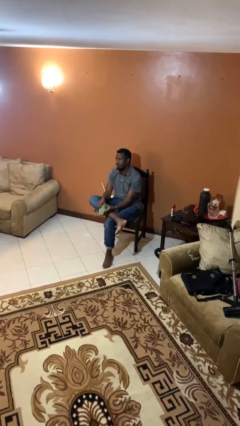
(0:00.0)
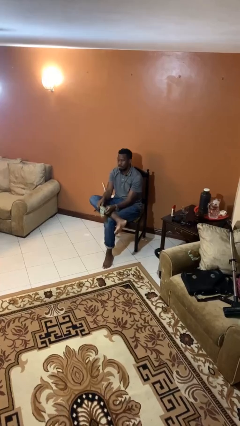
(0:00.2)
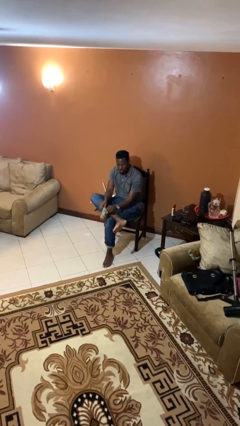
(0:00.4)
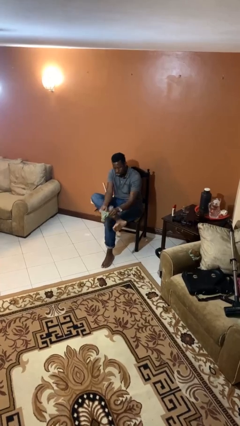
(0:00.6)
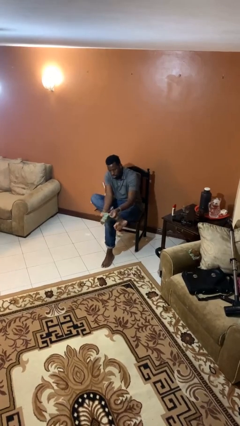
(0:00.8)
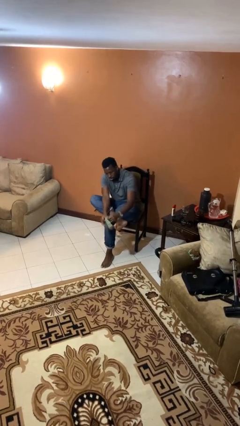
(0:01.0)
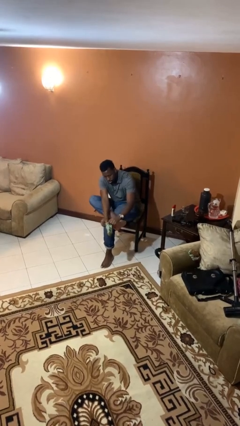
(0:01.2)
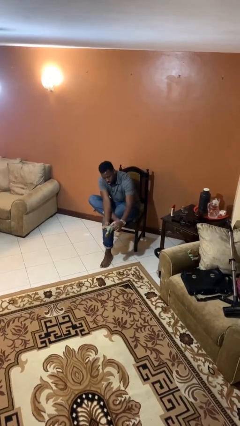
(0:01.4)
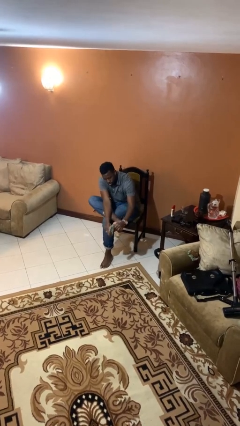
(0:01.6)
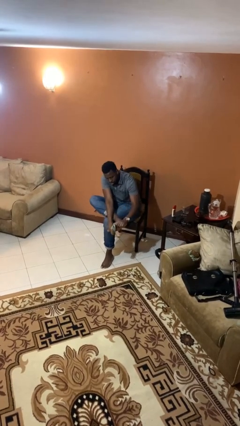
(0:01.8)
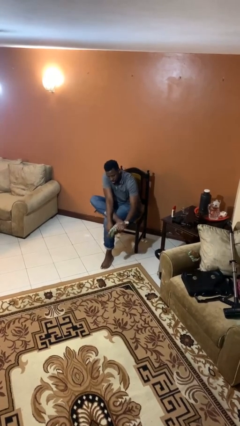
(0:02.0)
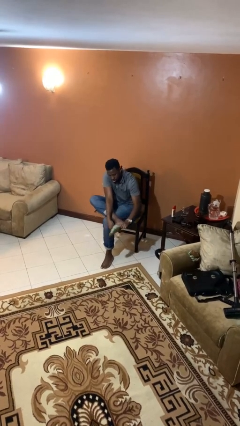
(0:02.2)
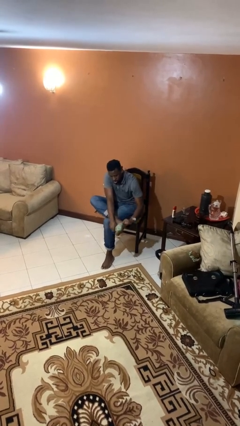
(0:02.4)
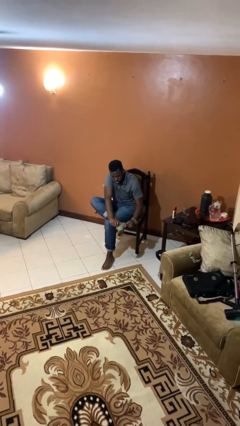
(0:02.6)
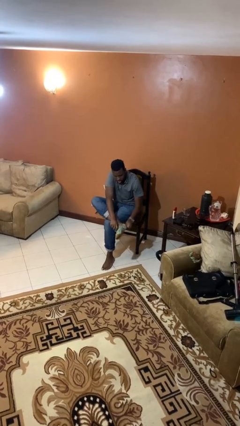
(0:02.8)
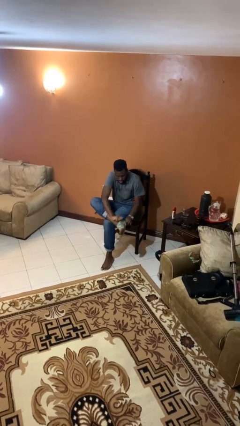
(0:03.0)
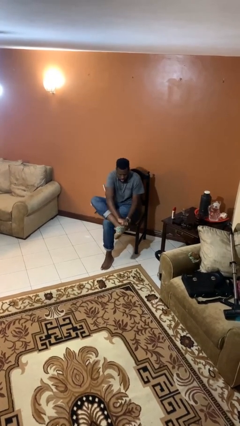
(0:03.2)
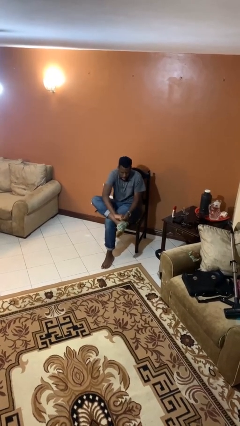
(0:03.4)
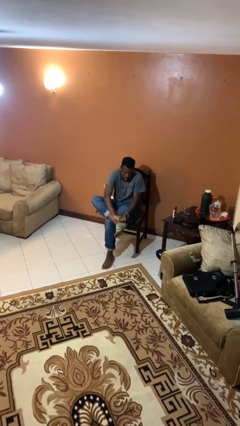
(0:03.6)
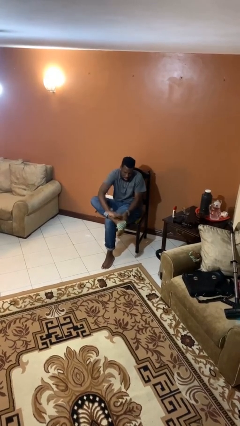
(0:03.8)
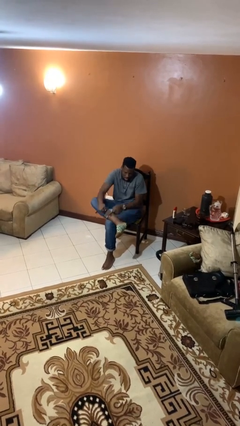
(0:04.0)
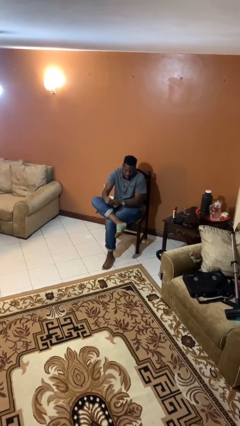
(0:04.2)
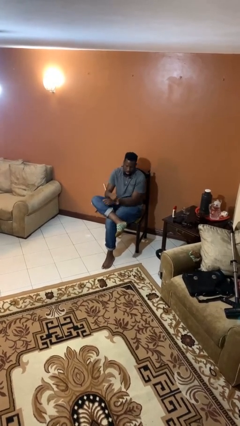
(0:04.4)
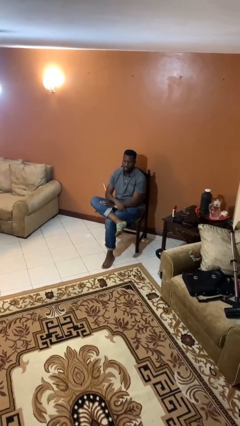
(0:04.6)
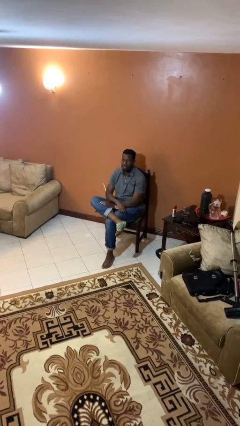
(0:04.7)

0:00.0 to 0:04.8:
person puts on socks

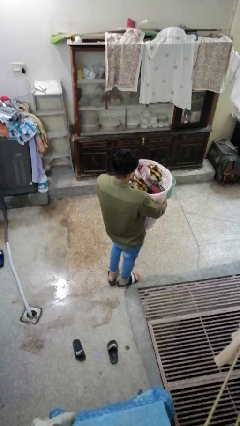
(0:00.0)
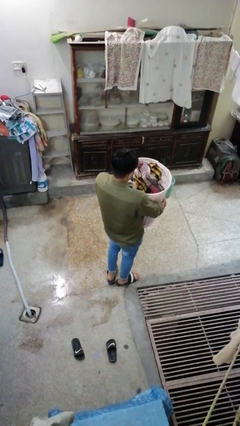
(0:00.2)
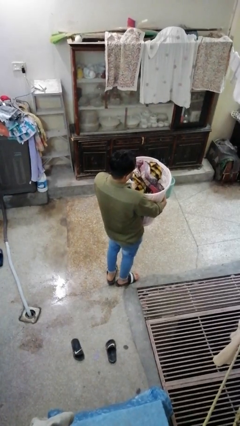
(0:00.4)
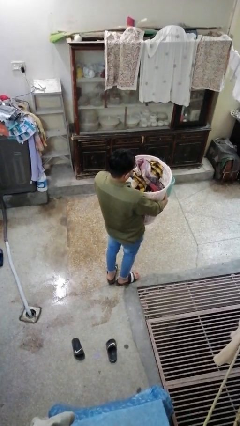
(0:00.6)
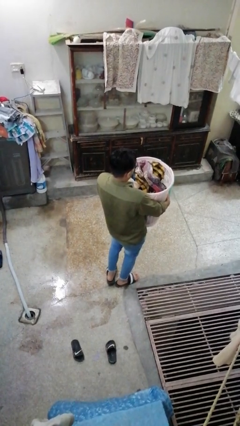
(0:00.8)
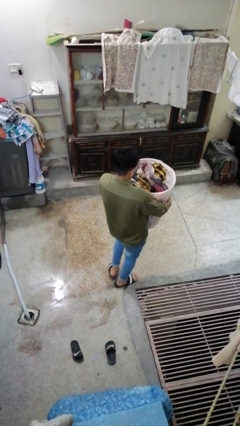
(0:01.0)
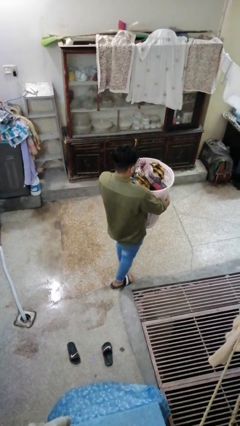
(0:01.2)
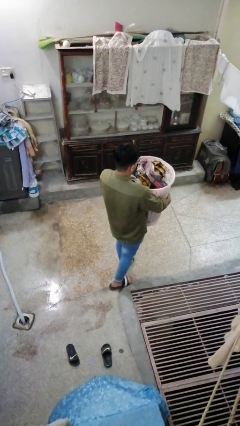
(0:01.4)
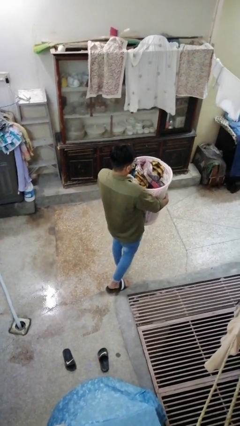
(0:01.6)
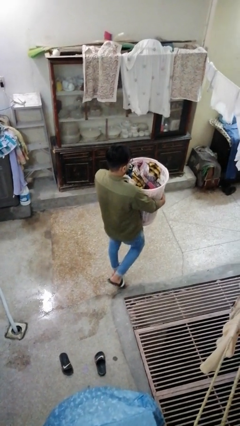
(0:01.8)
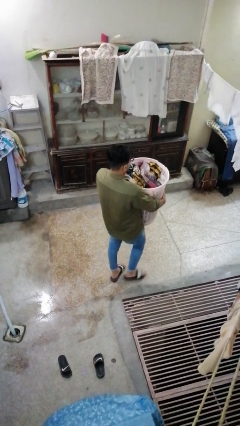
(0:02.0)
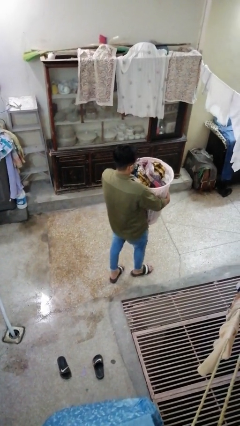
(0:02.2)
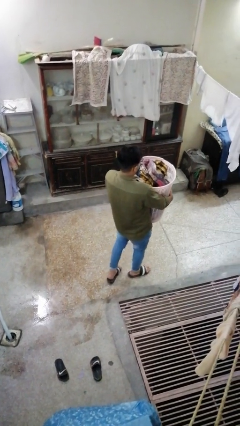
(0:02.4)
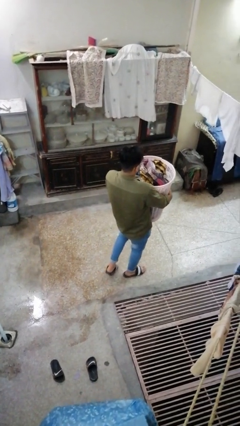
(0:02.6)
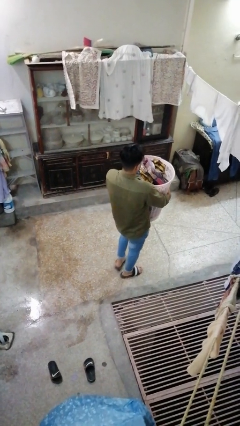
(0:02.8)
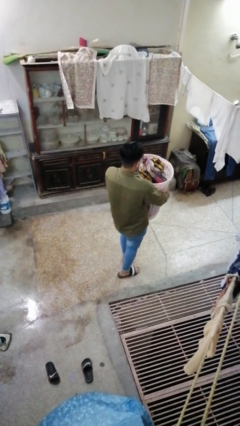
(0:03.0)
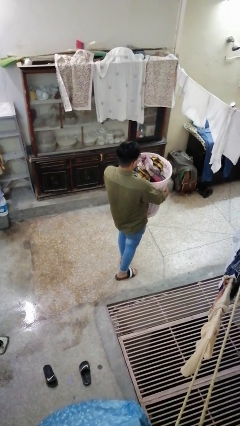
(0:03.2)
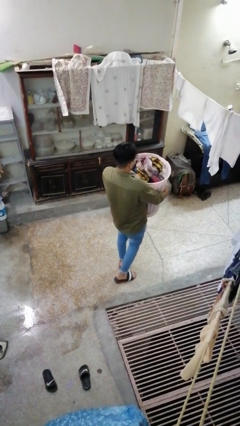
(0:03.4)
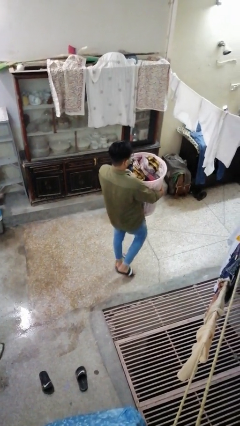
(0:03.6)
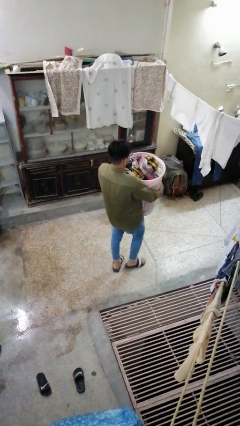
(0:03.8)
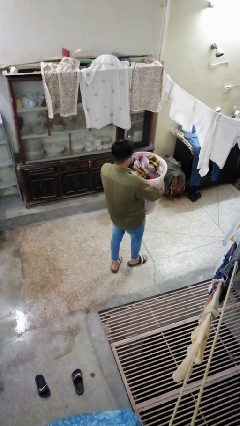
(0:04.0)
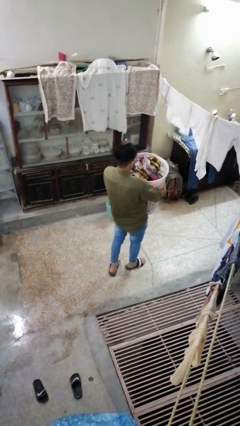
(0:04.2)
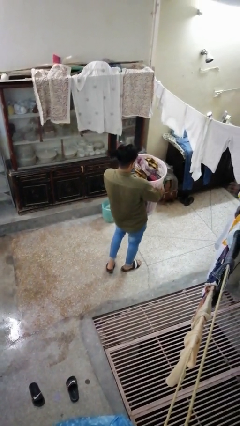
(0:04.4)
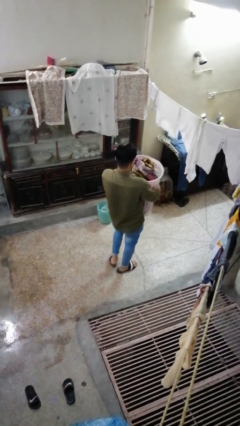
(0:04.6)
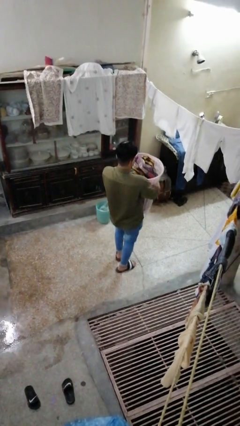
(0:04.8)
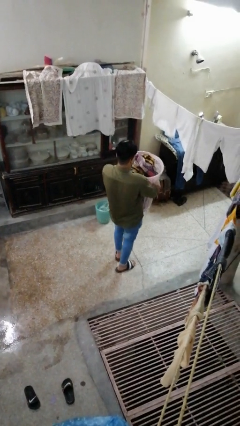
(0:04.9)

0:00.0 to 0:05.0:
person carries laundry basket

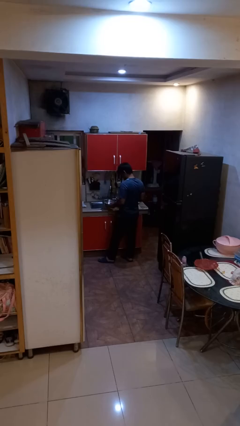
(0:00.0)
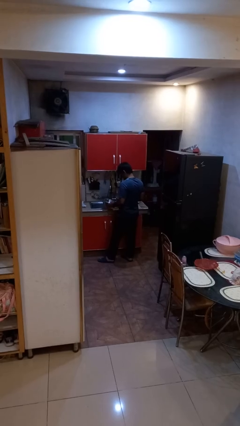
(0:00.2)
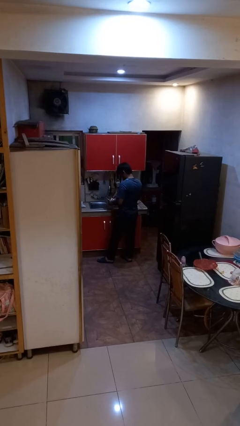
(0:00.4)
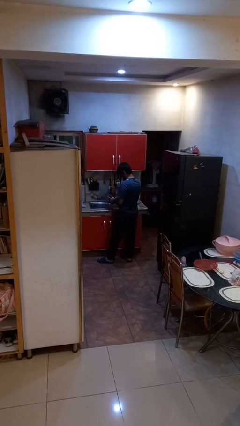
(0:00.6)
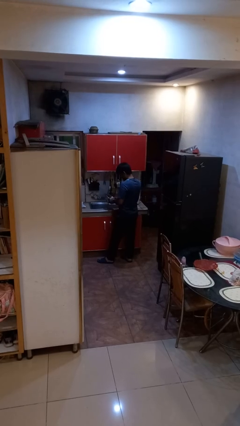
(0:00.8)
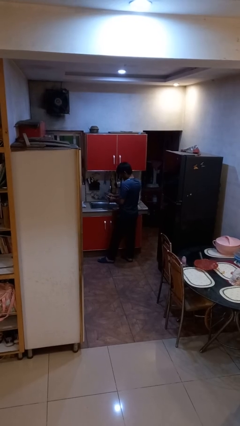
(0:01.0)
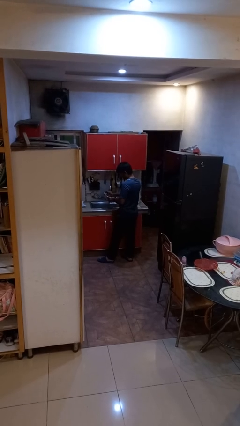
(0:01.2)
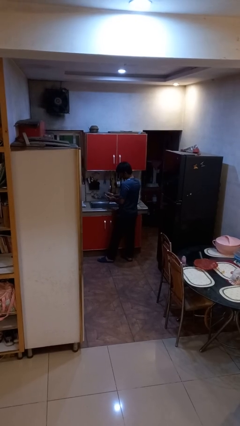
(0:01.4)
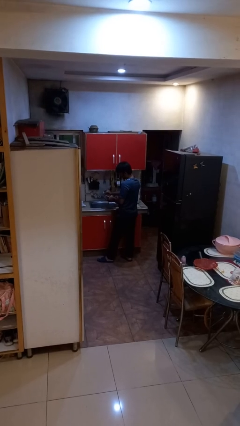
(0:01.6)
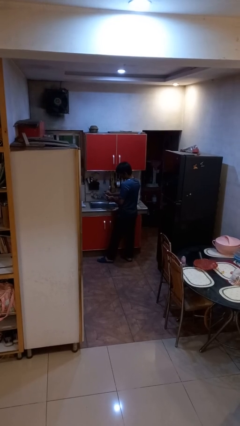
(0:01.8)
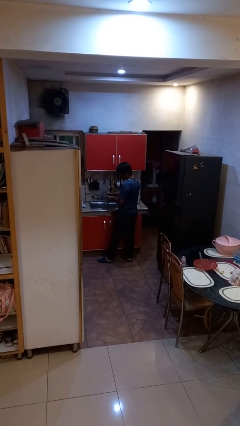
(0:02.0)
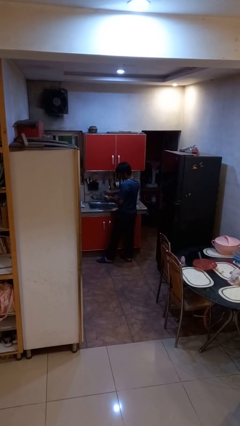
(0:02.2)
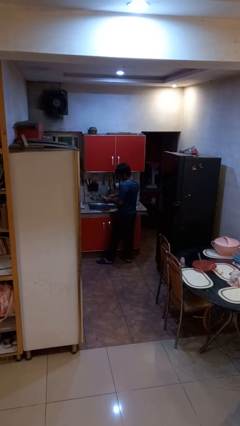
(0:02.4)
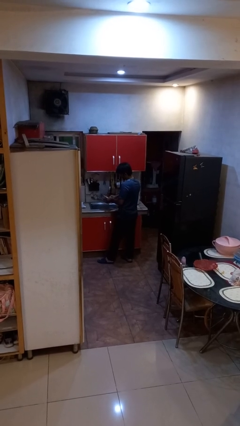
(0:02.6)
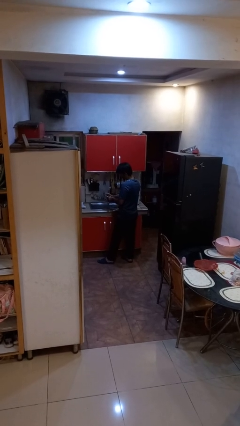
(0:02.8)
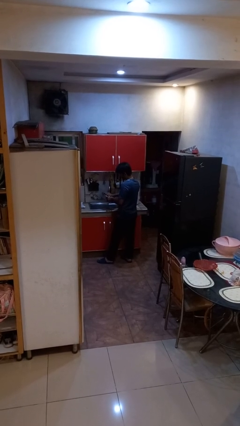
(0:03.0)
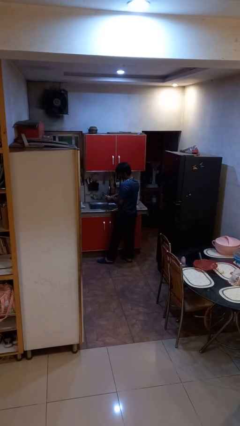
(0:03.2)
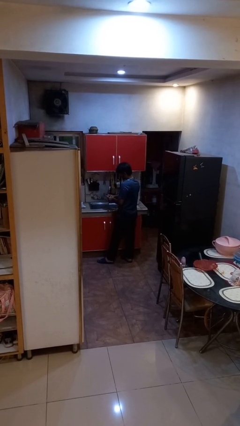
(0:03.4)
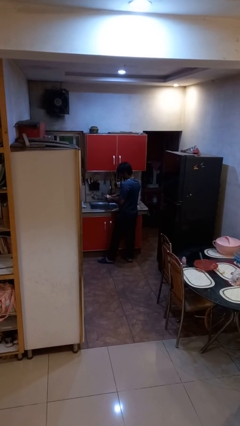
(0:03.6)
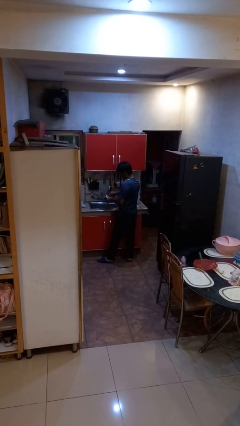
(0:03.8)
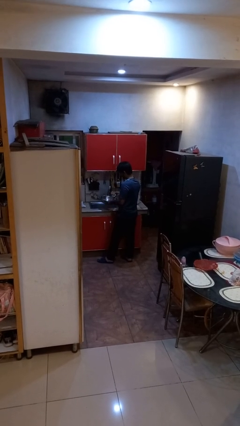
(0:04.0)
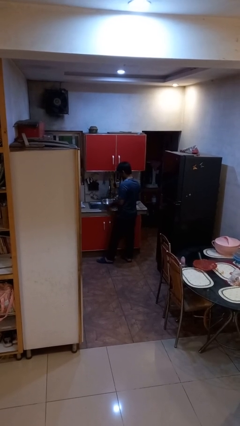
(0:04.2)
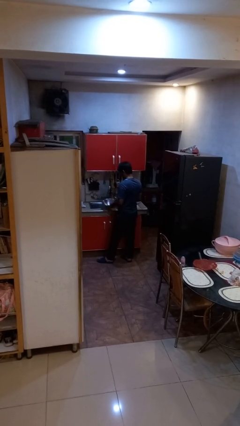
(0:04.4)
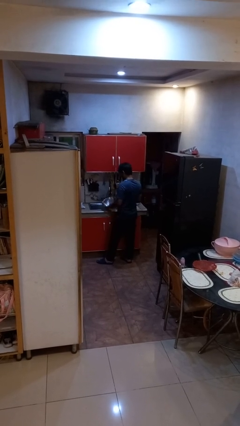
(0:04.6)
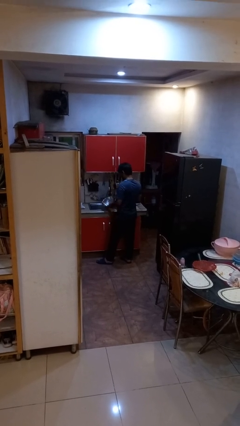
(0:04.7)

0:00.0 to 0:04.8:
person washes dish

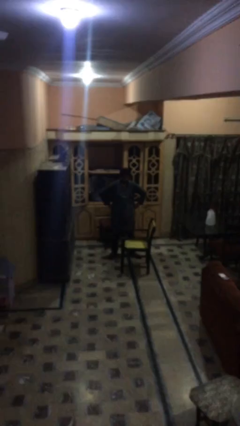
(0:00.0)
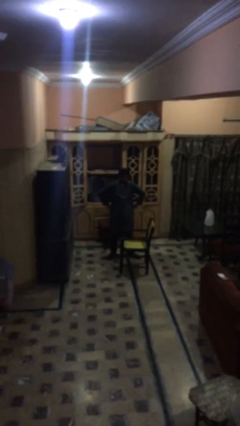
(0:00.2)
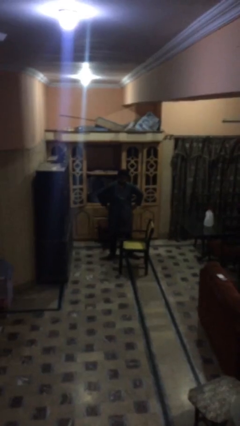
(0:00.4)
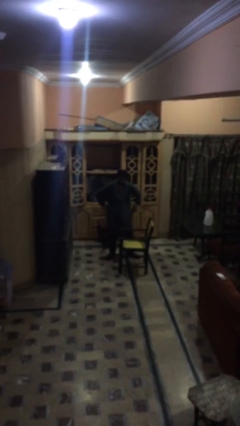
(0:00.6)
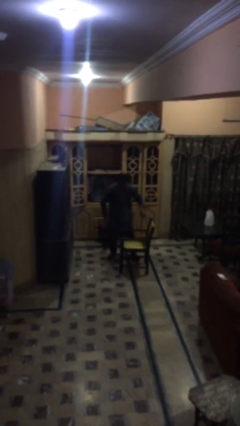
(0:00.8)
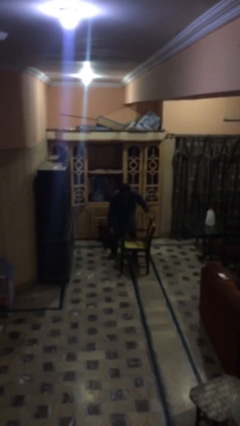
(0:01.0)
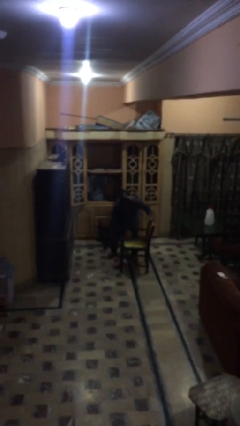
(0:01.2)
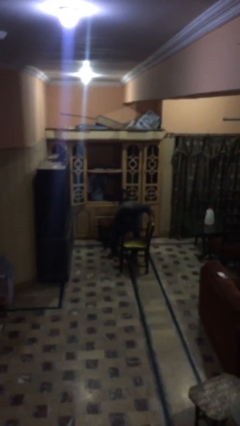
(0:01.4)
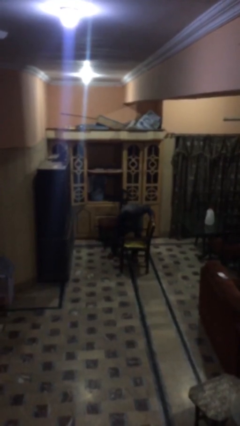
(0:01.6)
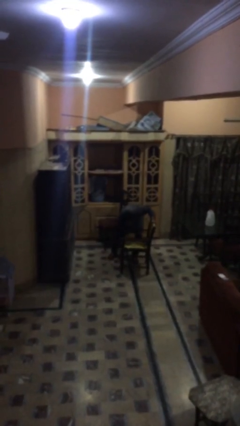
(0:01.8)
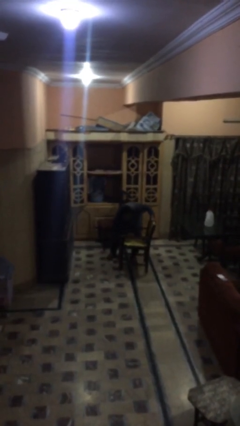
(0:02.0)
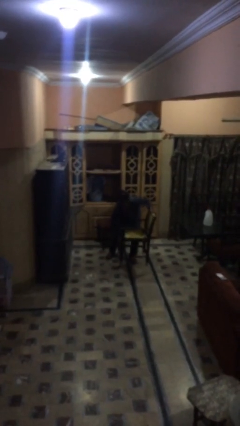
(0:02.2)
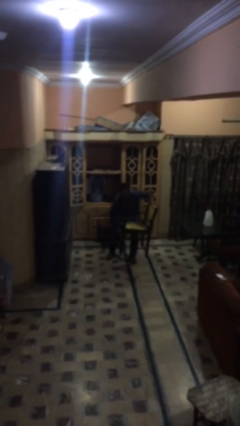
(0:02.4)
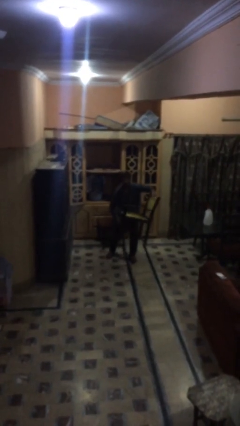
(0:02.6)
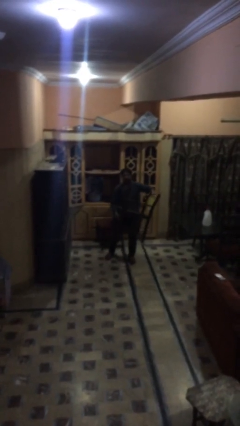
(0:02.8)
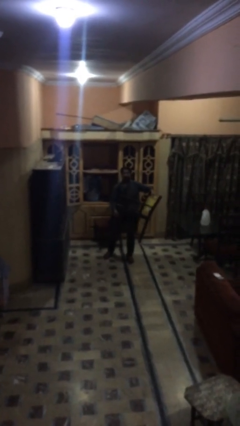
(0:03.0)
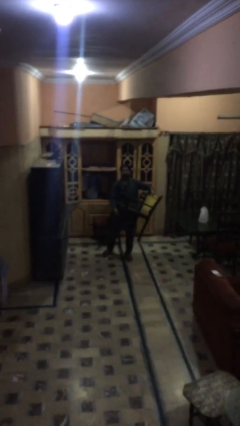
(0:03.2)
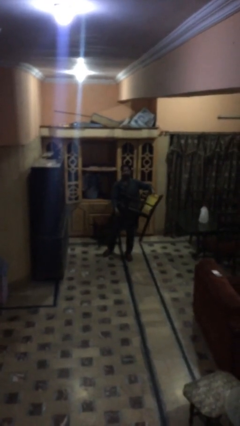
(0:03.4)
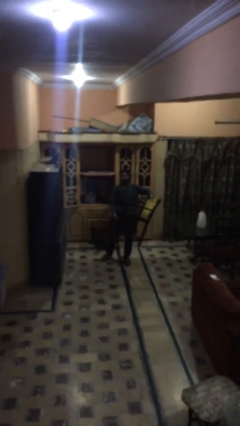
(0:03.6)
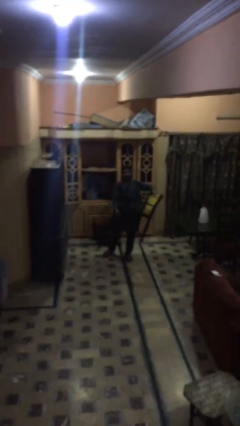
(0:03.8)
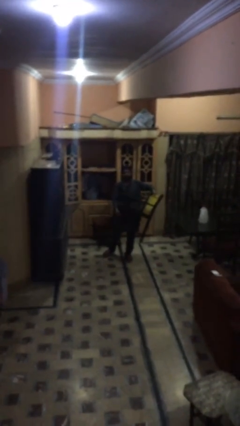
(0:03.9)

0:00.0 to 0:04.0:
person picks up object from floor
